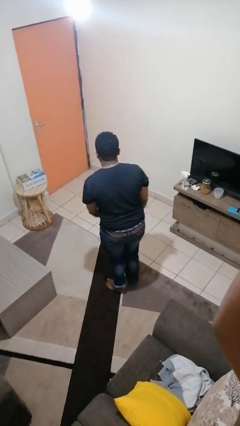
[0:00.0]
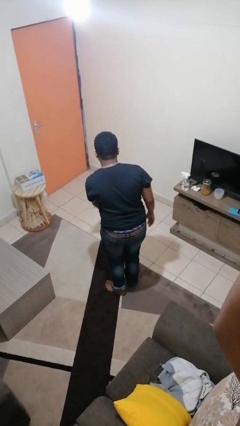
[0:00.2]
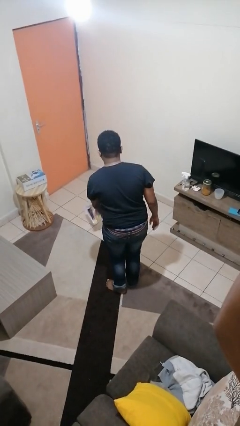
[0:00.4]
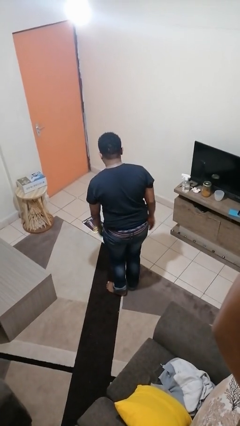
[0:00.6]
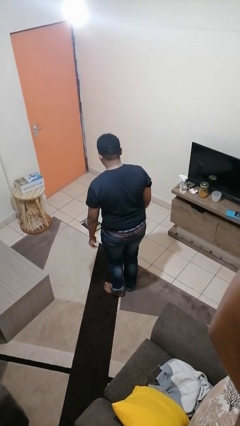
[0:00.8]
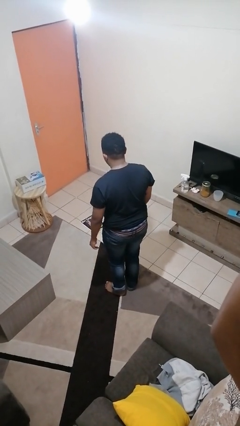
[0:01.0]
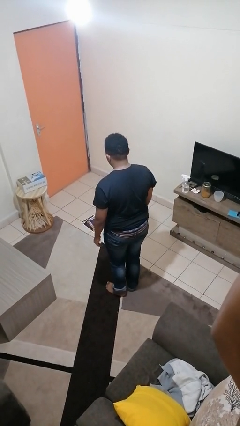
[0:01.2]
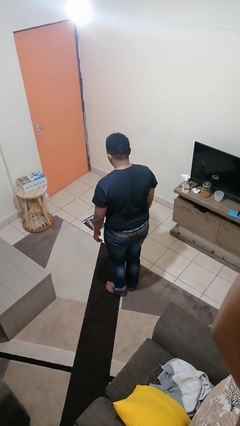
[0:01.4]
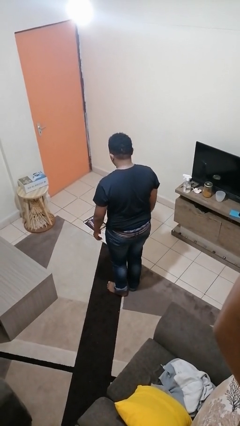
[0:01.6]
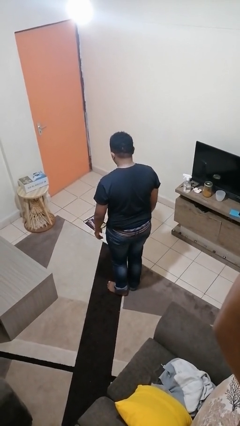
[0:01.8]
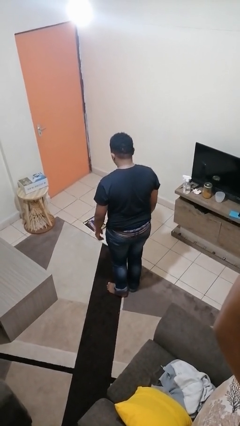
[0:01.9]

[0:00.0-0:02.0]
person throws object to ground

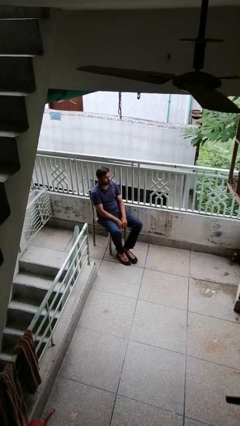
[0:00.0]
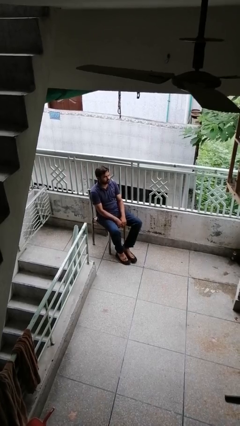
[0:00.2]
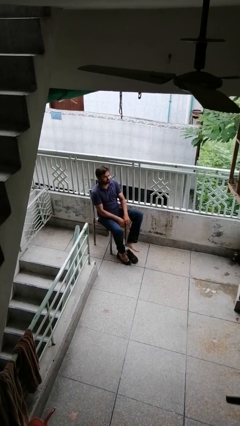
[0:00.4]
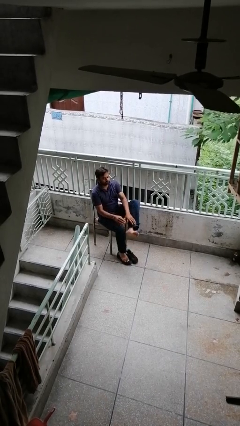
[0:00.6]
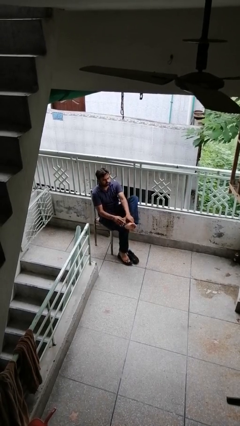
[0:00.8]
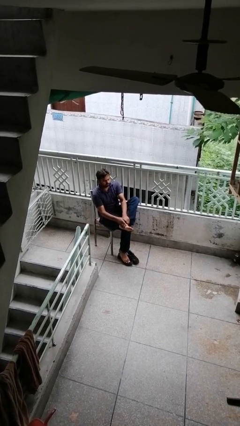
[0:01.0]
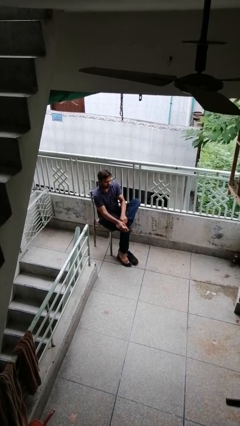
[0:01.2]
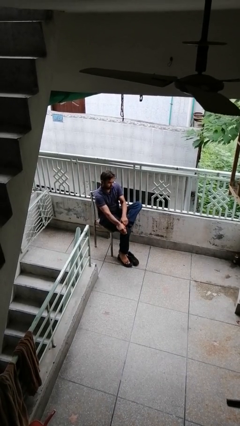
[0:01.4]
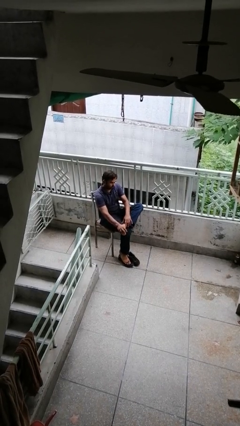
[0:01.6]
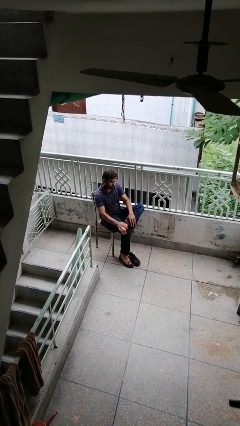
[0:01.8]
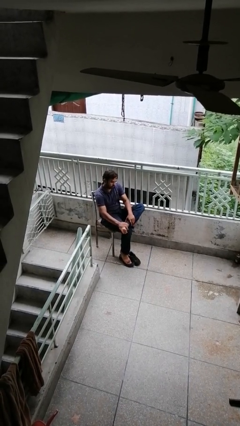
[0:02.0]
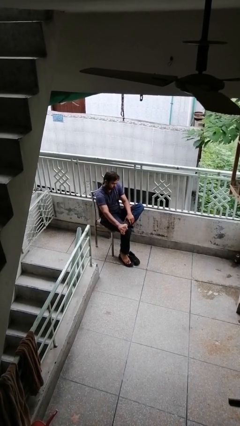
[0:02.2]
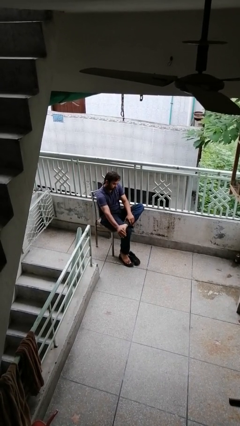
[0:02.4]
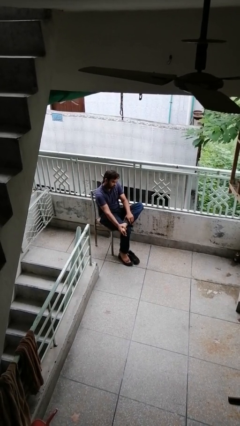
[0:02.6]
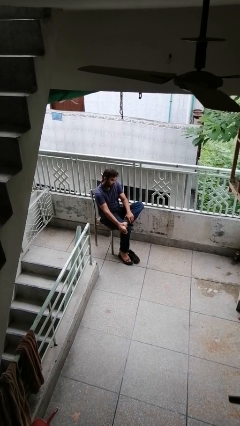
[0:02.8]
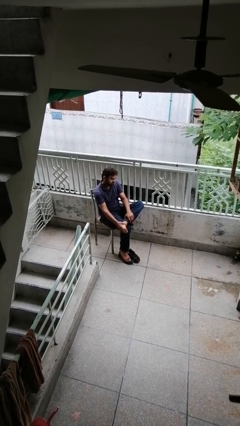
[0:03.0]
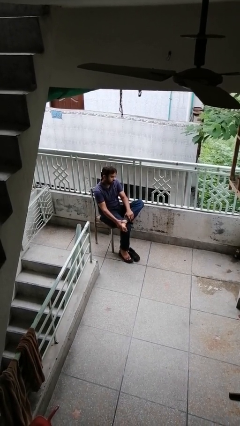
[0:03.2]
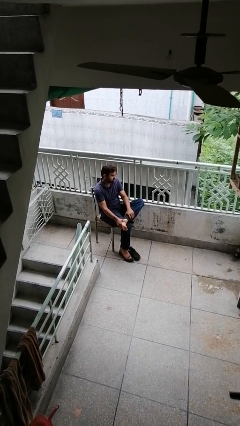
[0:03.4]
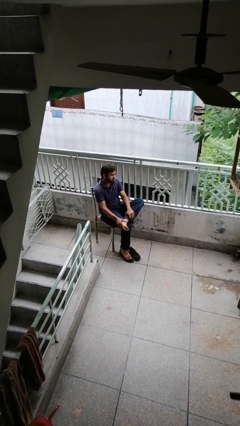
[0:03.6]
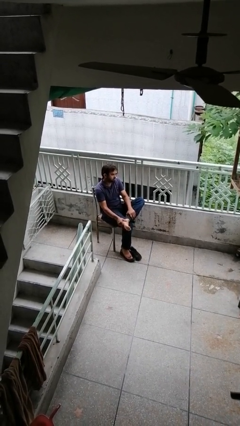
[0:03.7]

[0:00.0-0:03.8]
person rubs foot

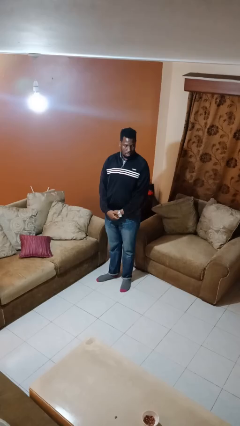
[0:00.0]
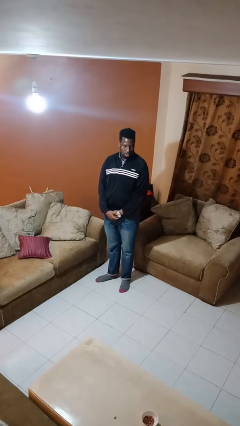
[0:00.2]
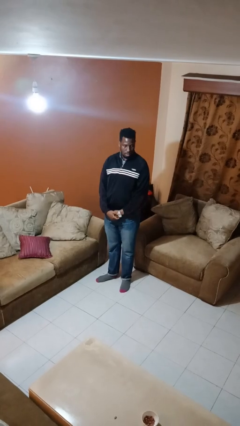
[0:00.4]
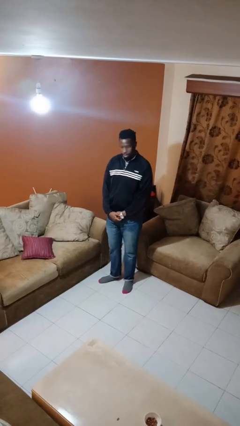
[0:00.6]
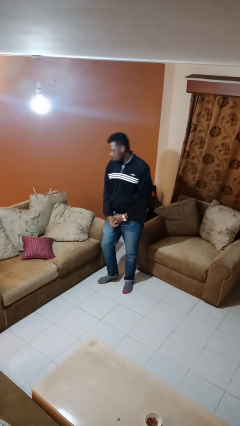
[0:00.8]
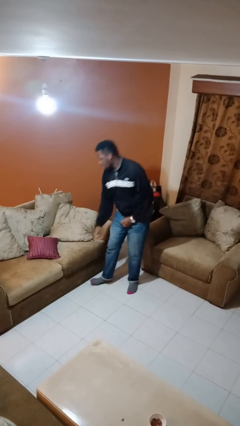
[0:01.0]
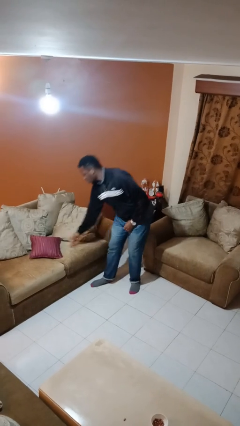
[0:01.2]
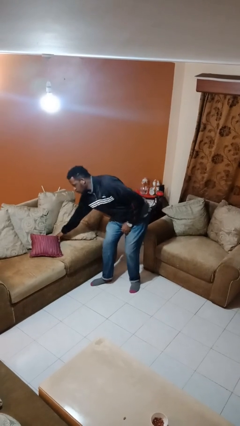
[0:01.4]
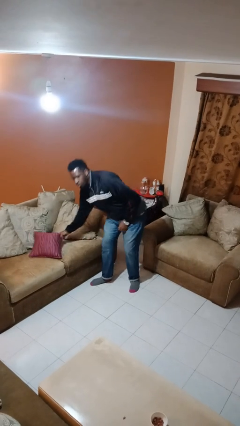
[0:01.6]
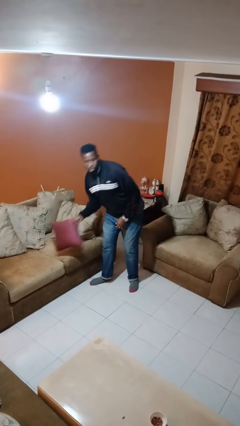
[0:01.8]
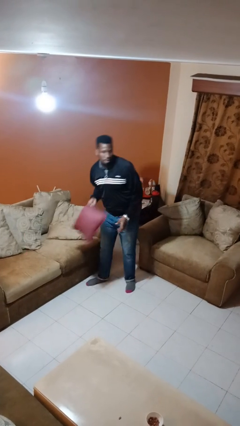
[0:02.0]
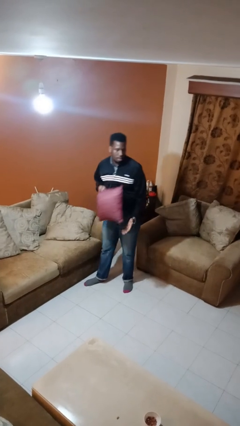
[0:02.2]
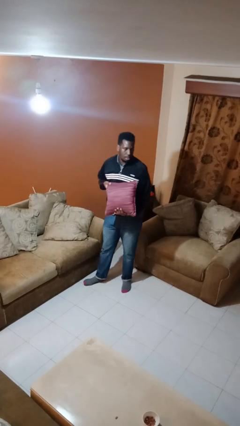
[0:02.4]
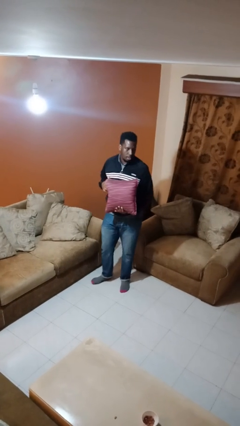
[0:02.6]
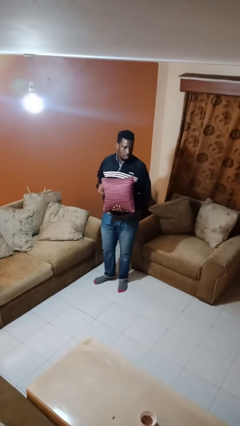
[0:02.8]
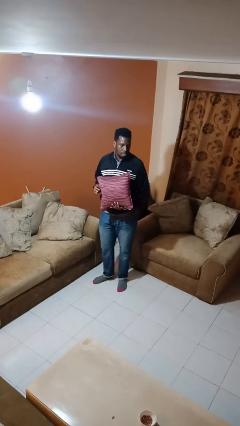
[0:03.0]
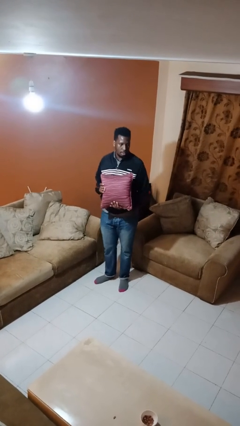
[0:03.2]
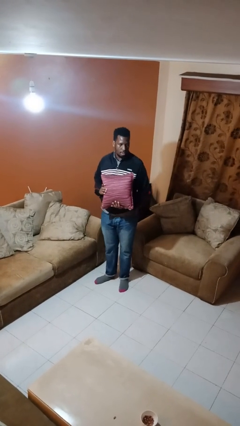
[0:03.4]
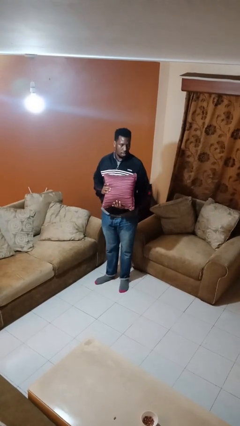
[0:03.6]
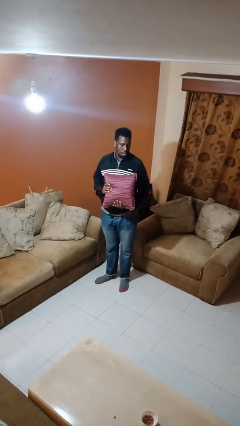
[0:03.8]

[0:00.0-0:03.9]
person picks up object from couch

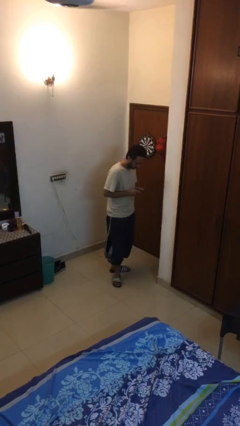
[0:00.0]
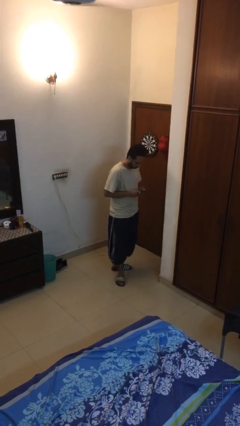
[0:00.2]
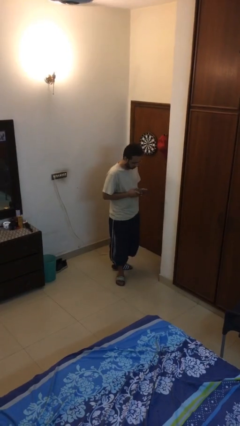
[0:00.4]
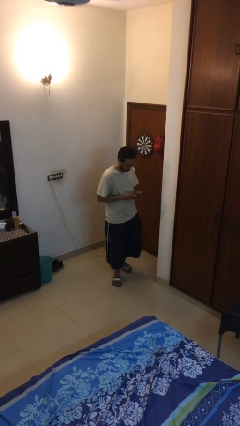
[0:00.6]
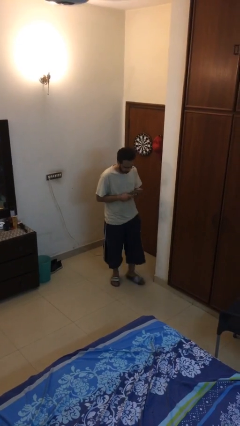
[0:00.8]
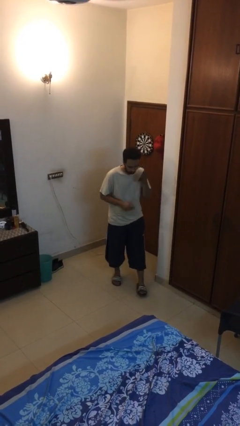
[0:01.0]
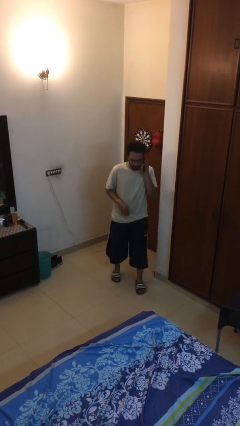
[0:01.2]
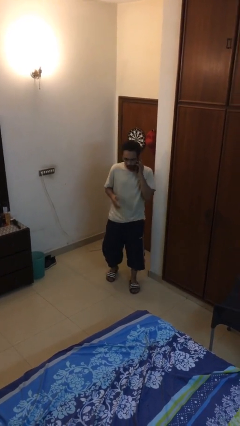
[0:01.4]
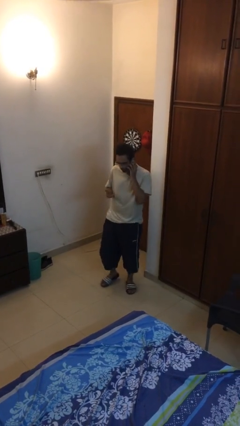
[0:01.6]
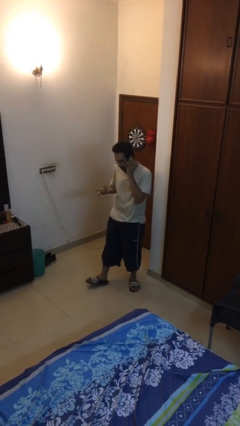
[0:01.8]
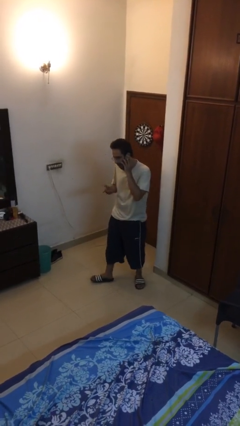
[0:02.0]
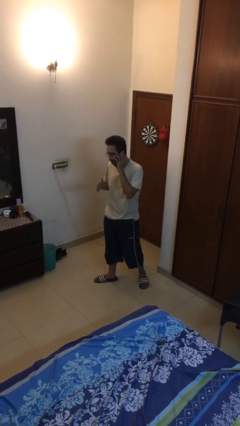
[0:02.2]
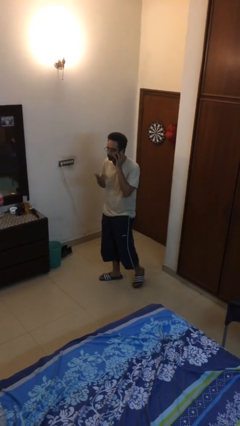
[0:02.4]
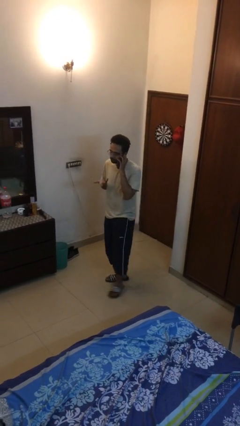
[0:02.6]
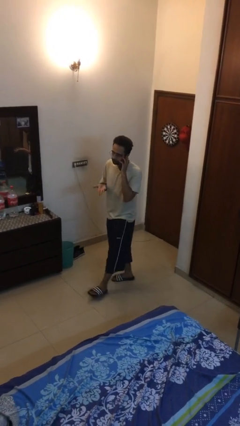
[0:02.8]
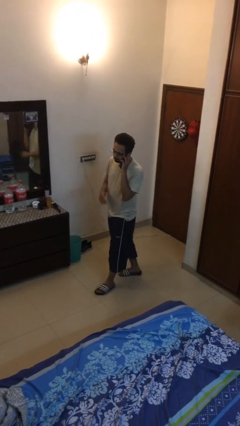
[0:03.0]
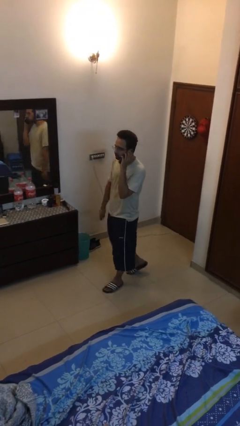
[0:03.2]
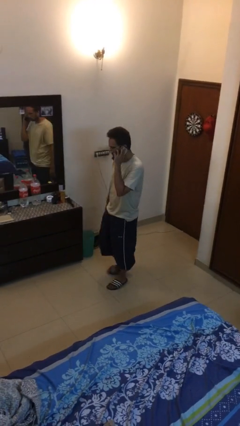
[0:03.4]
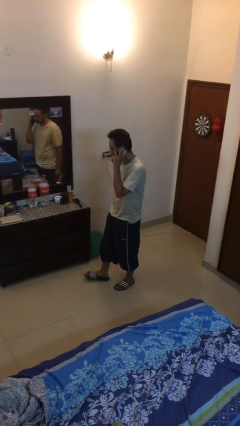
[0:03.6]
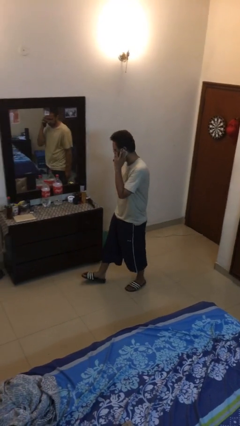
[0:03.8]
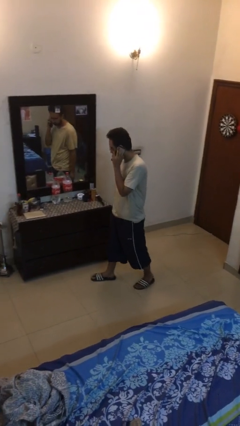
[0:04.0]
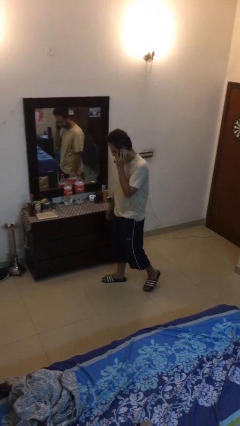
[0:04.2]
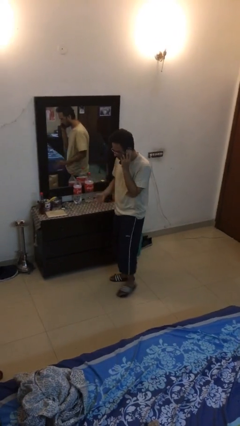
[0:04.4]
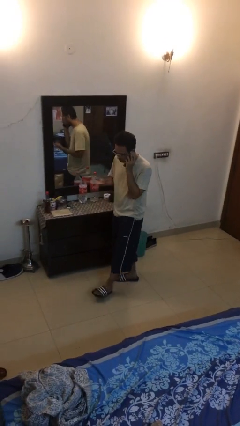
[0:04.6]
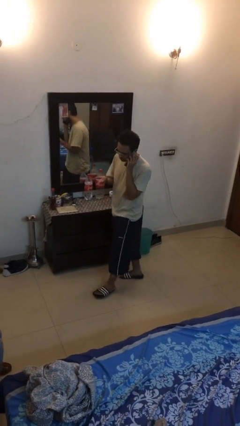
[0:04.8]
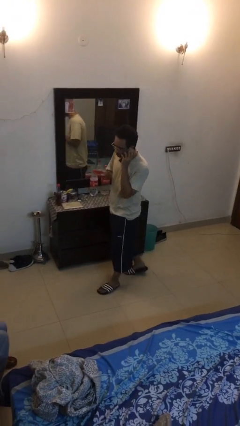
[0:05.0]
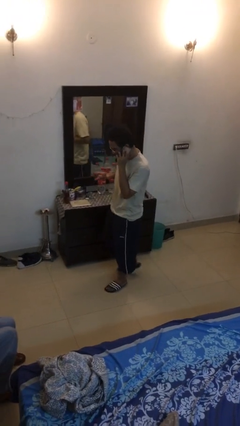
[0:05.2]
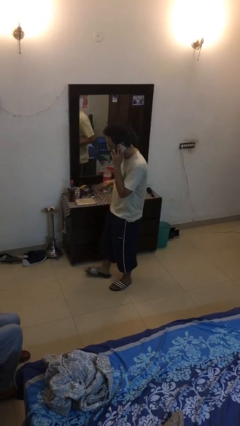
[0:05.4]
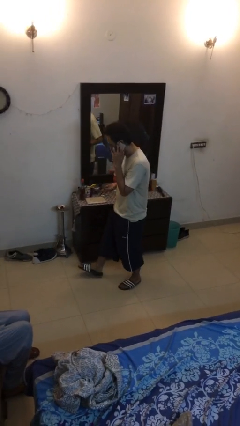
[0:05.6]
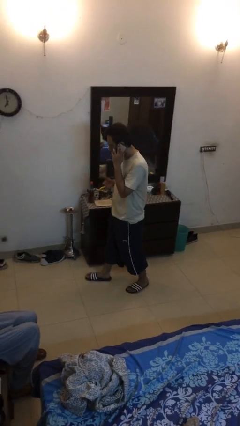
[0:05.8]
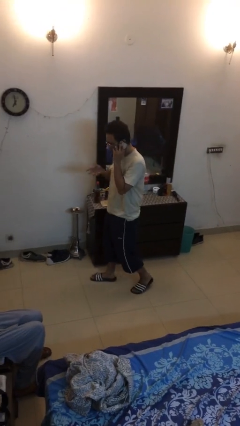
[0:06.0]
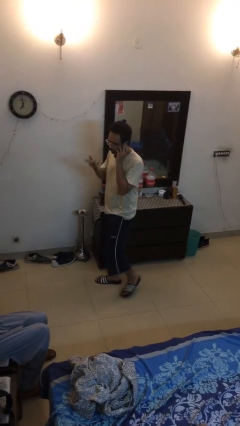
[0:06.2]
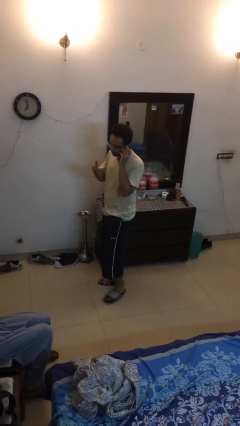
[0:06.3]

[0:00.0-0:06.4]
person talks on phone

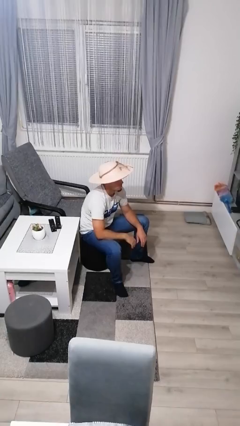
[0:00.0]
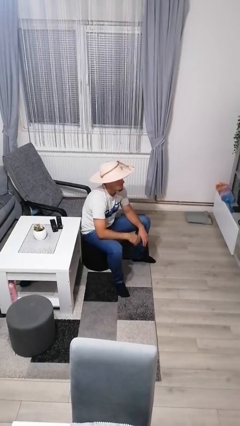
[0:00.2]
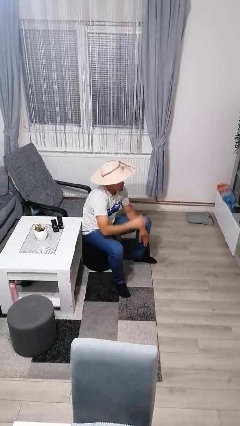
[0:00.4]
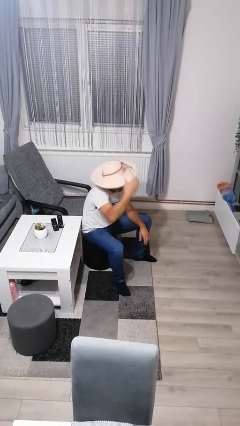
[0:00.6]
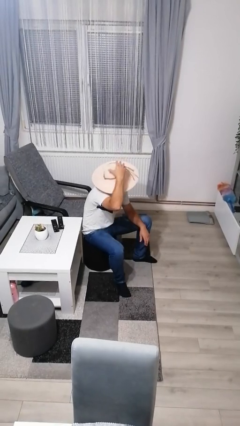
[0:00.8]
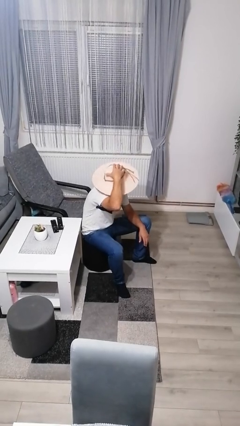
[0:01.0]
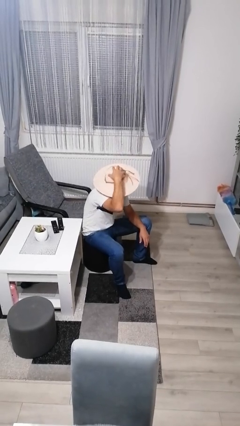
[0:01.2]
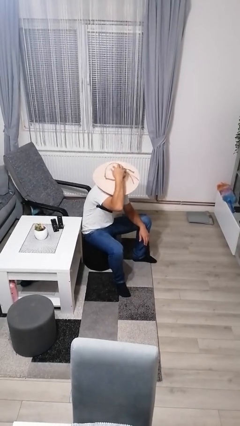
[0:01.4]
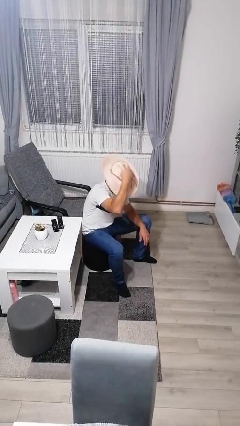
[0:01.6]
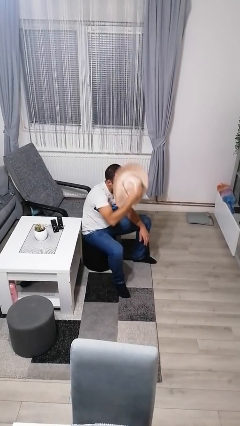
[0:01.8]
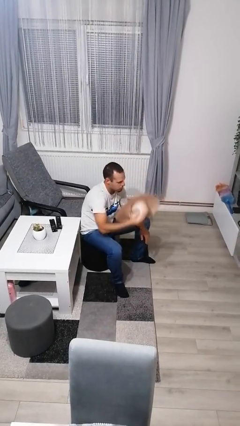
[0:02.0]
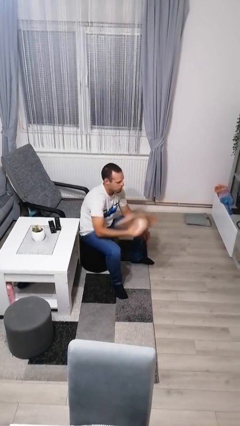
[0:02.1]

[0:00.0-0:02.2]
person takes off hat
